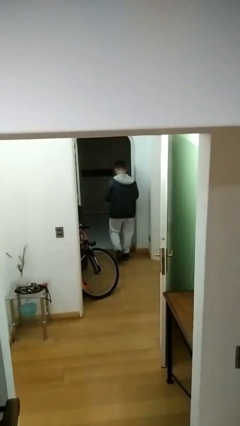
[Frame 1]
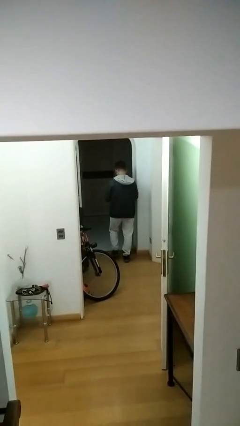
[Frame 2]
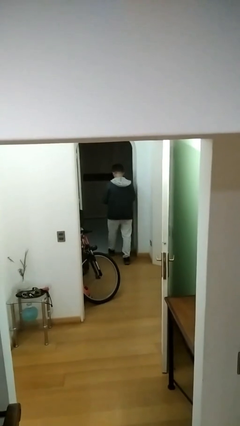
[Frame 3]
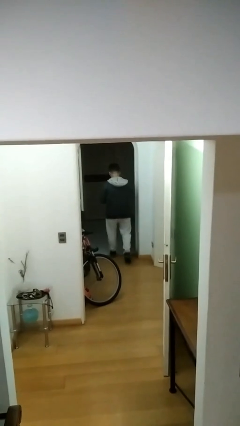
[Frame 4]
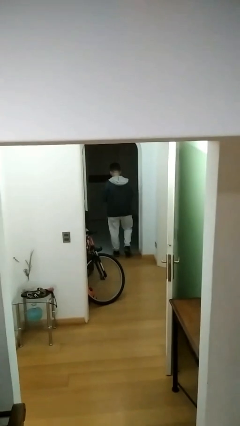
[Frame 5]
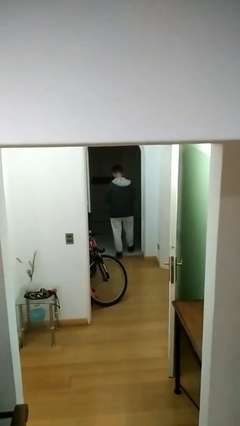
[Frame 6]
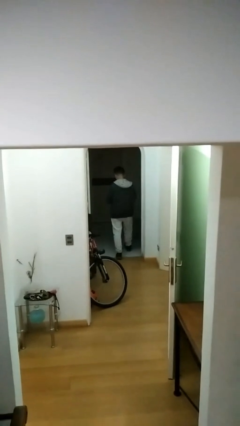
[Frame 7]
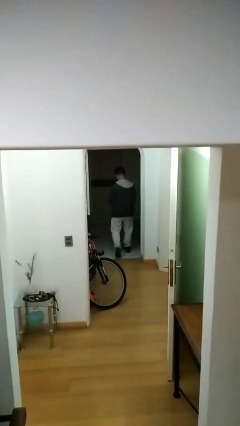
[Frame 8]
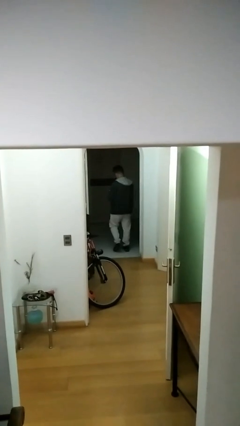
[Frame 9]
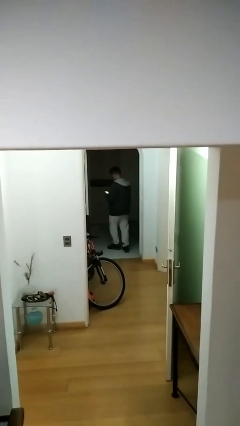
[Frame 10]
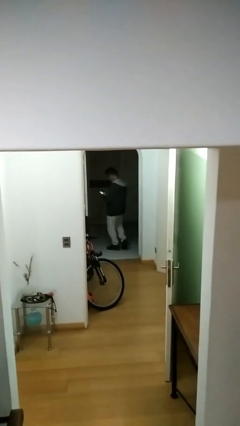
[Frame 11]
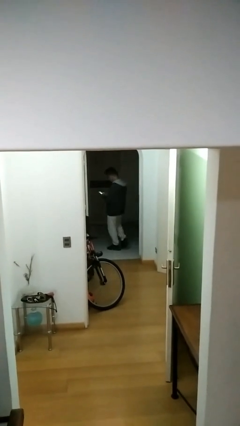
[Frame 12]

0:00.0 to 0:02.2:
person exits scene through structure

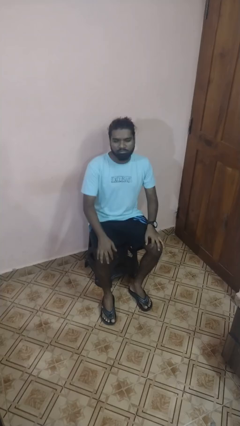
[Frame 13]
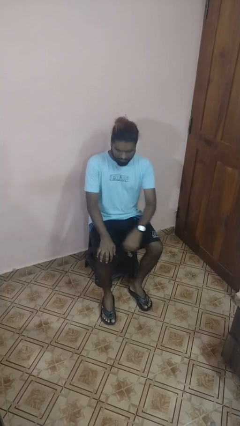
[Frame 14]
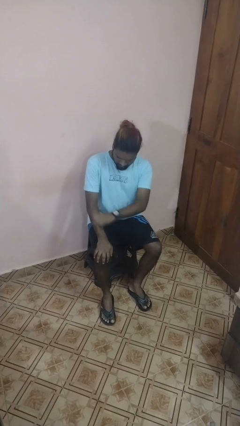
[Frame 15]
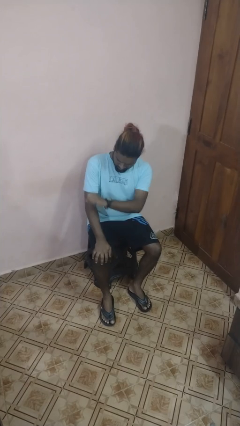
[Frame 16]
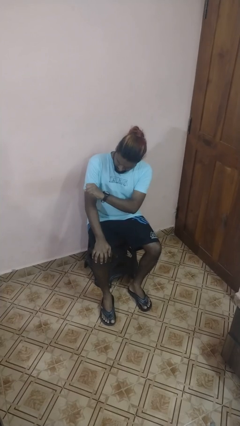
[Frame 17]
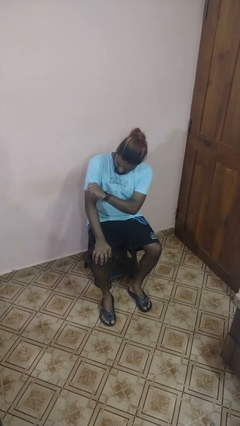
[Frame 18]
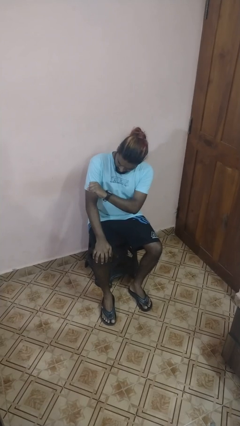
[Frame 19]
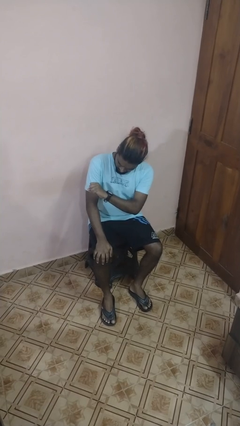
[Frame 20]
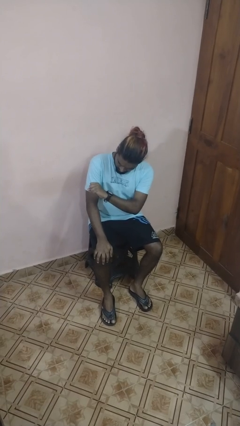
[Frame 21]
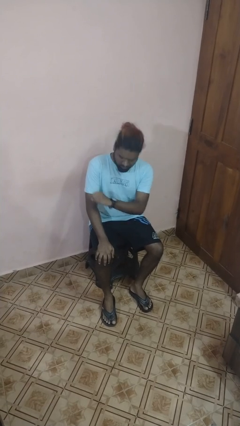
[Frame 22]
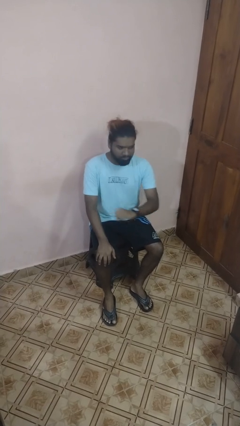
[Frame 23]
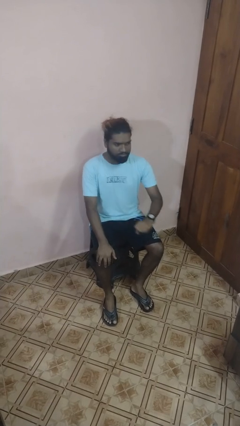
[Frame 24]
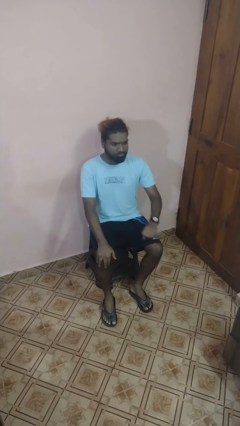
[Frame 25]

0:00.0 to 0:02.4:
person looks at wristwatch

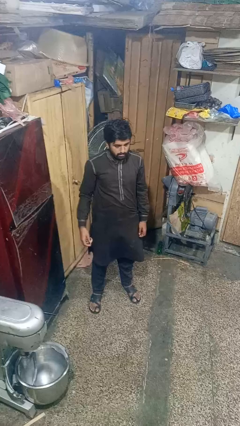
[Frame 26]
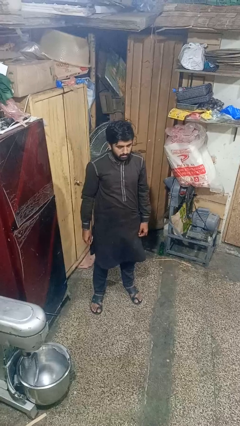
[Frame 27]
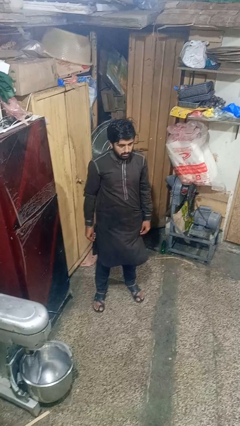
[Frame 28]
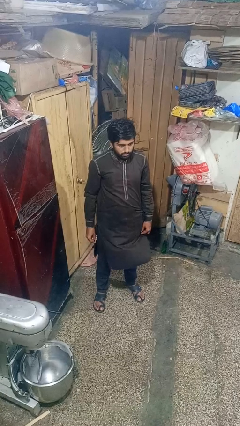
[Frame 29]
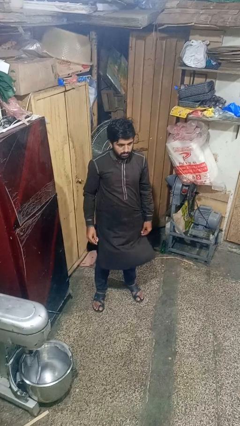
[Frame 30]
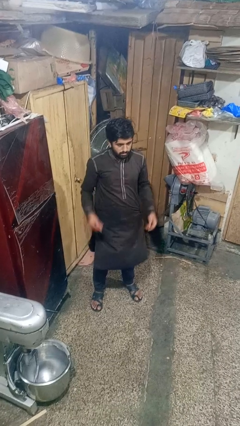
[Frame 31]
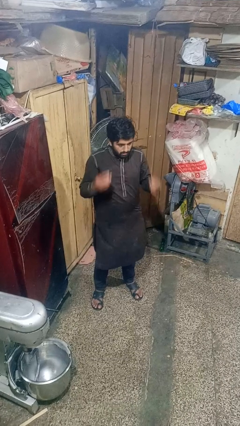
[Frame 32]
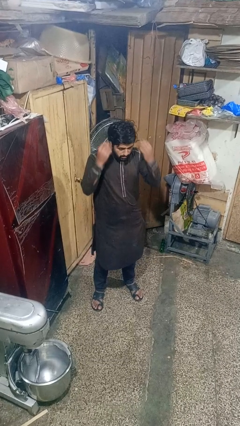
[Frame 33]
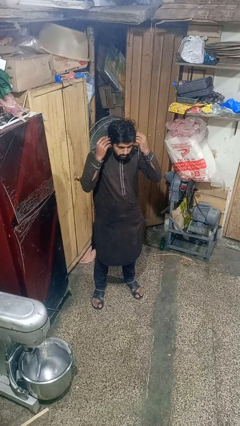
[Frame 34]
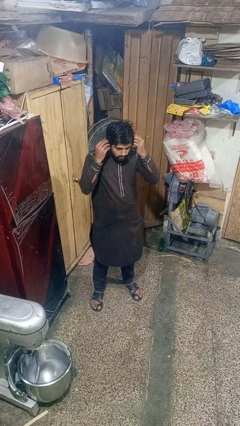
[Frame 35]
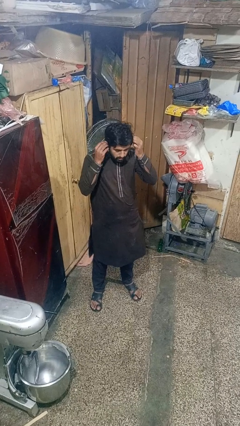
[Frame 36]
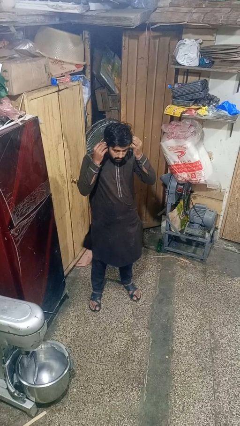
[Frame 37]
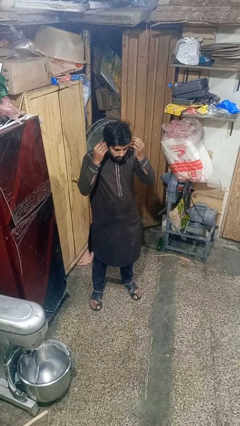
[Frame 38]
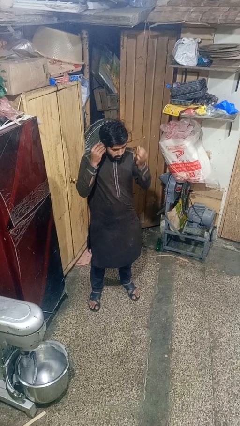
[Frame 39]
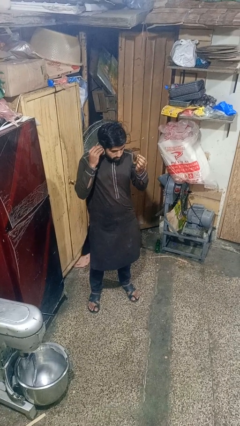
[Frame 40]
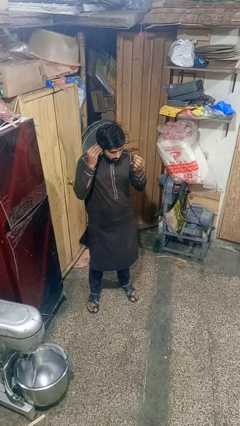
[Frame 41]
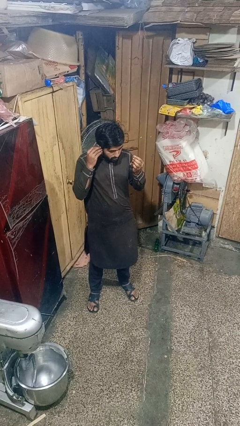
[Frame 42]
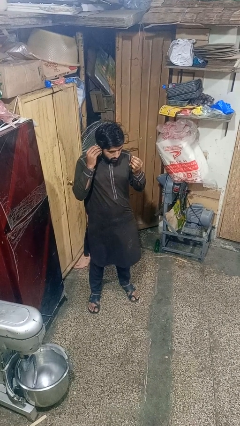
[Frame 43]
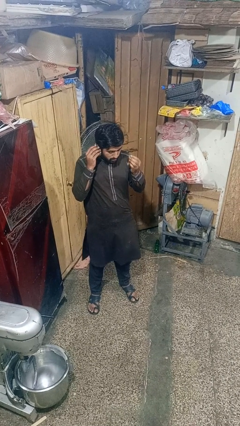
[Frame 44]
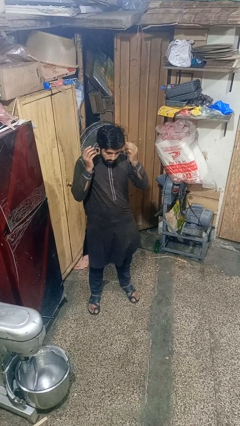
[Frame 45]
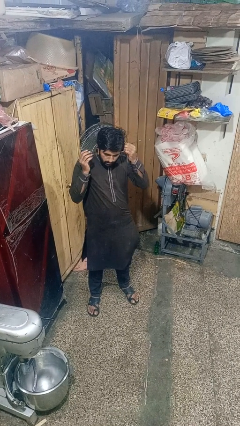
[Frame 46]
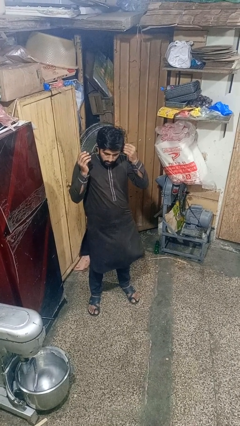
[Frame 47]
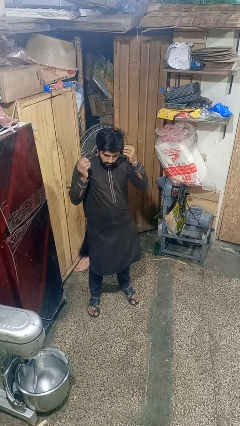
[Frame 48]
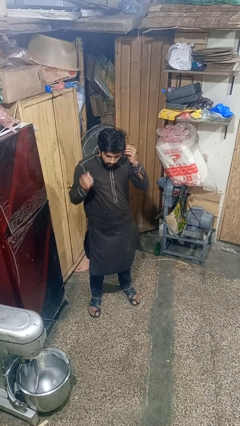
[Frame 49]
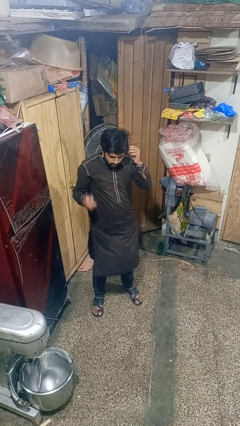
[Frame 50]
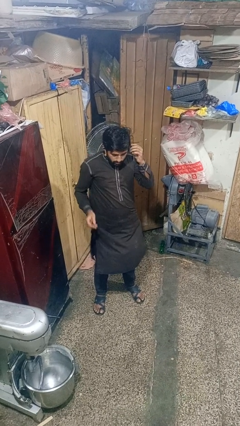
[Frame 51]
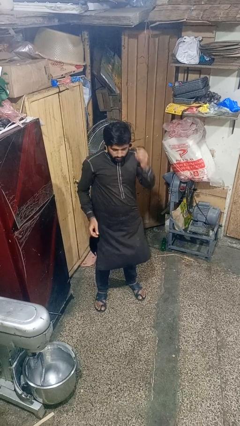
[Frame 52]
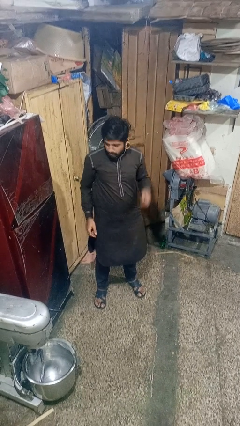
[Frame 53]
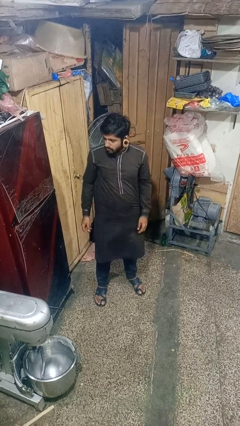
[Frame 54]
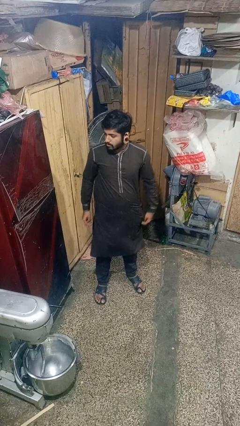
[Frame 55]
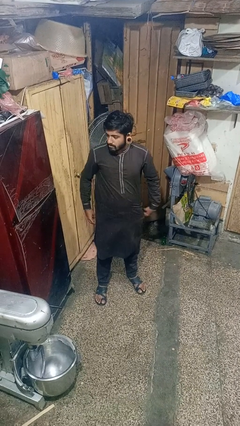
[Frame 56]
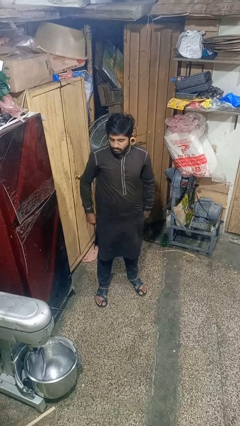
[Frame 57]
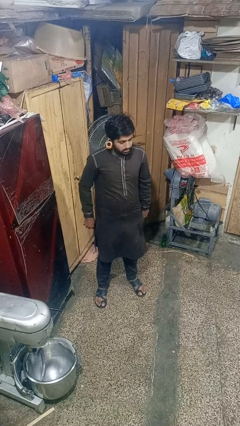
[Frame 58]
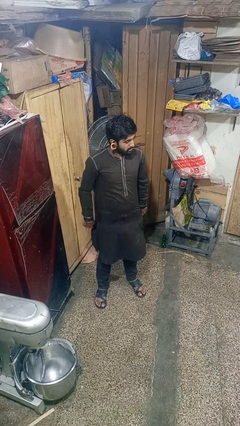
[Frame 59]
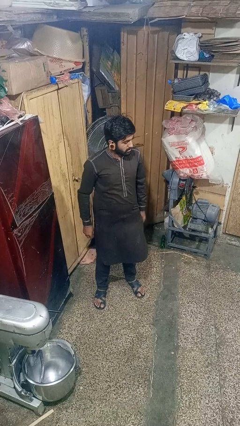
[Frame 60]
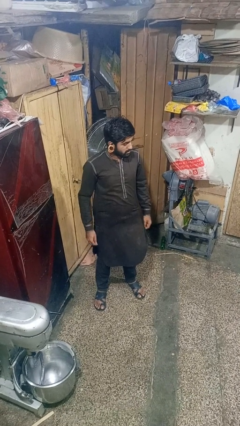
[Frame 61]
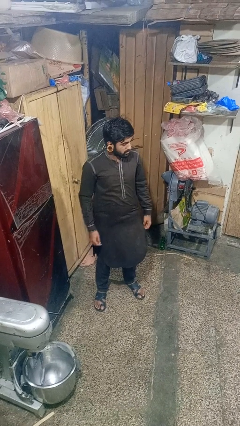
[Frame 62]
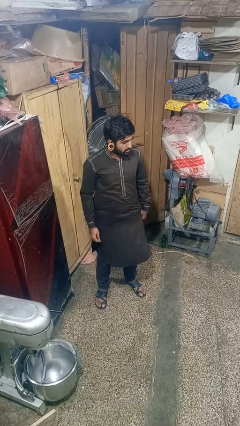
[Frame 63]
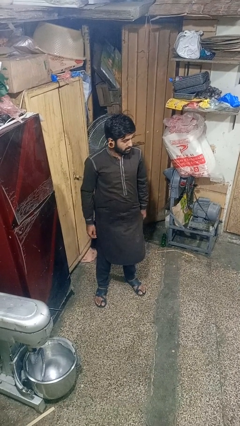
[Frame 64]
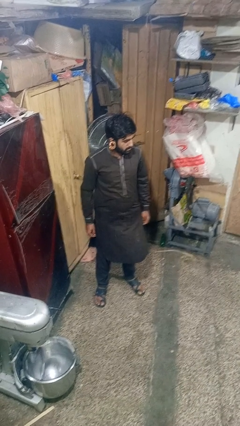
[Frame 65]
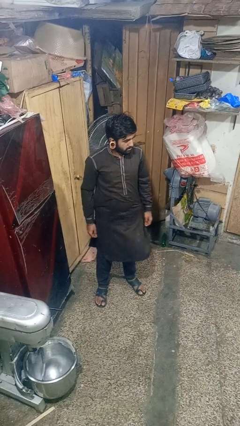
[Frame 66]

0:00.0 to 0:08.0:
person puts on earrings

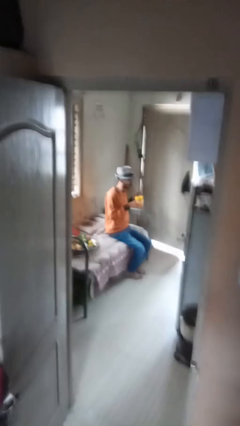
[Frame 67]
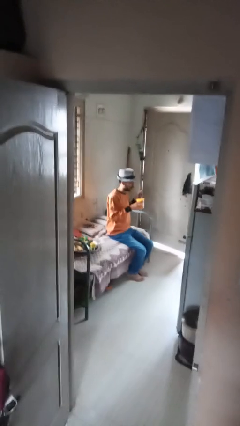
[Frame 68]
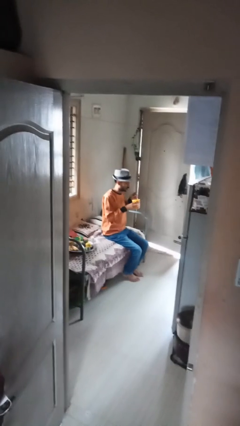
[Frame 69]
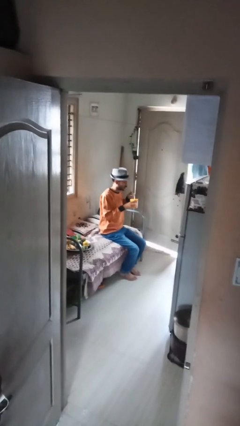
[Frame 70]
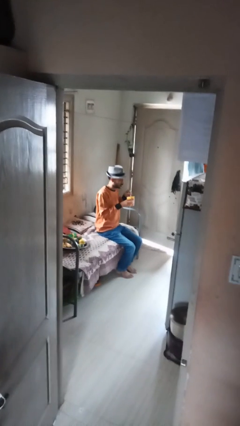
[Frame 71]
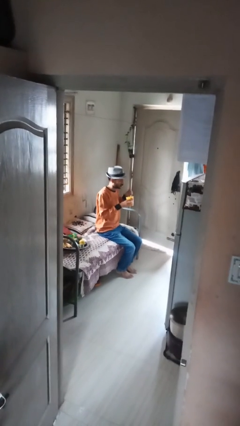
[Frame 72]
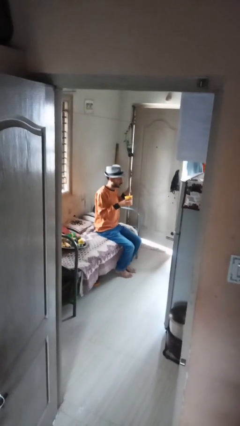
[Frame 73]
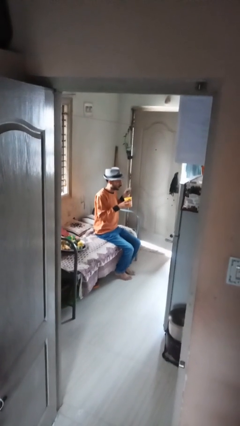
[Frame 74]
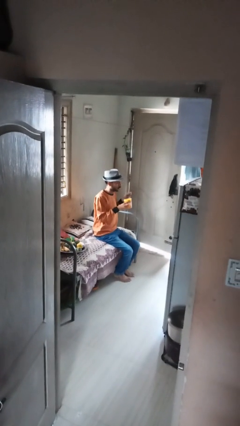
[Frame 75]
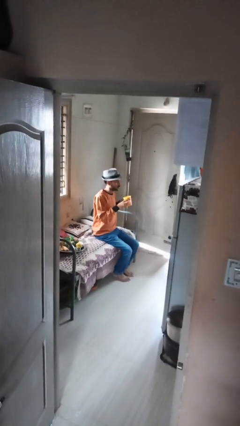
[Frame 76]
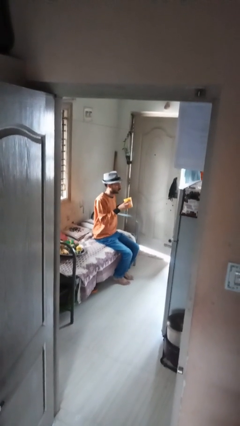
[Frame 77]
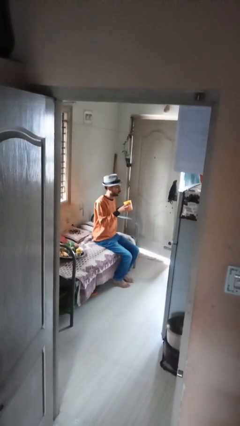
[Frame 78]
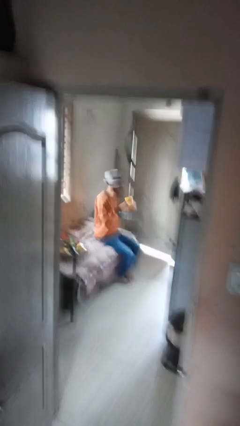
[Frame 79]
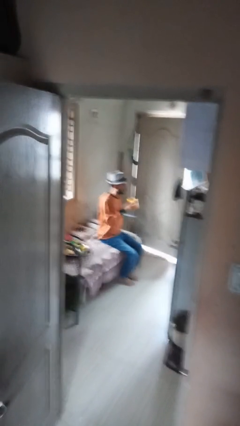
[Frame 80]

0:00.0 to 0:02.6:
person stirs mug

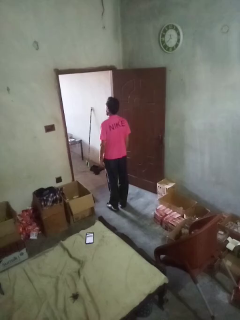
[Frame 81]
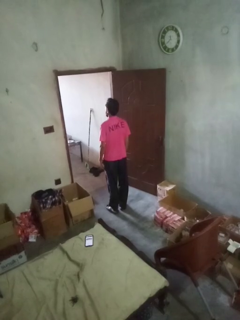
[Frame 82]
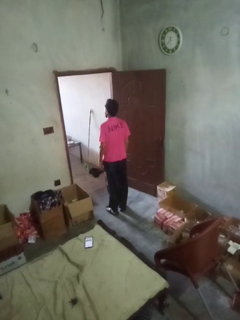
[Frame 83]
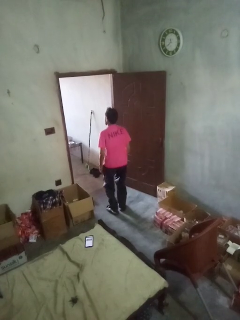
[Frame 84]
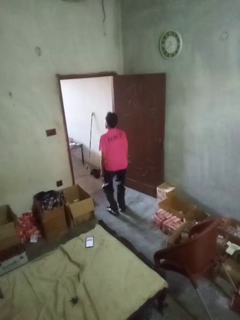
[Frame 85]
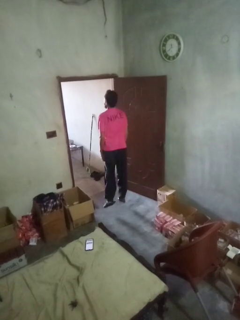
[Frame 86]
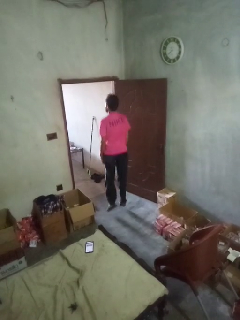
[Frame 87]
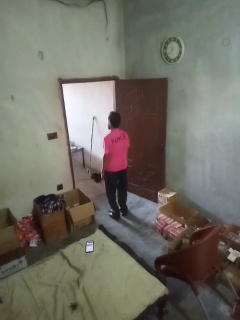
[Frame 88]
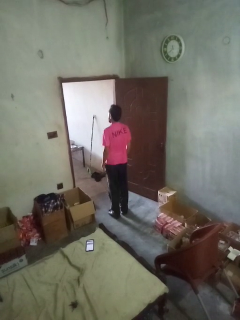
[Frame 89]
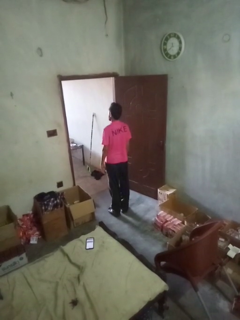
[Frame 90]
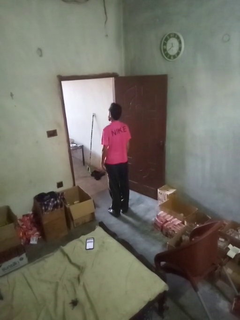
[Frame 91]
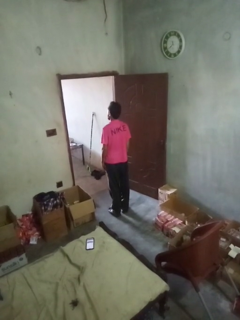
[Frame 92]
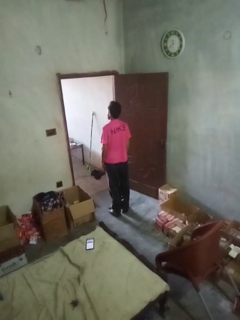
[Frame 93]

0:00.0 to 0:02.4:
person jumps

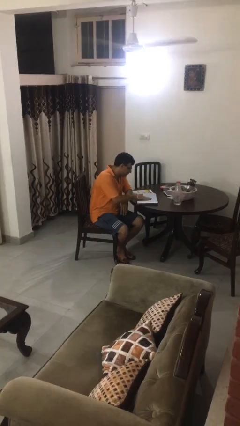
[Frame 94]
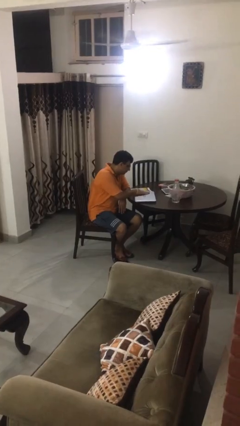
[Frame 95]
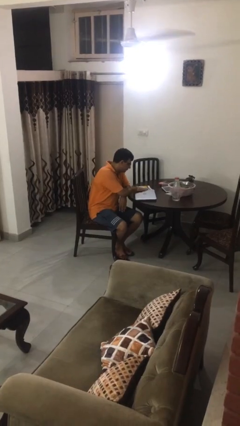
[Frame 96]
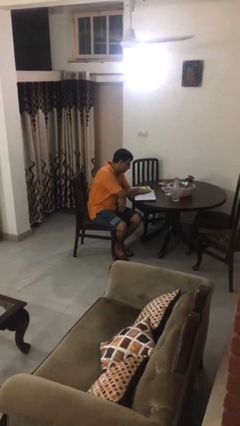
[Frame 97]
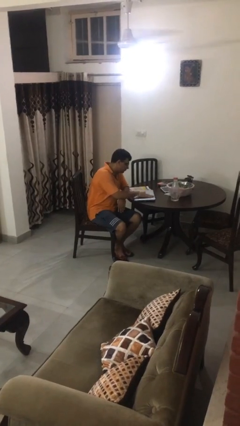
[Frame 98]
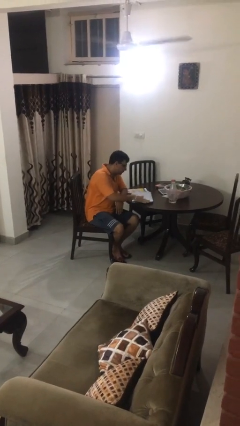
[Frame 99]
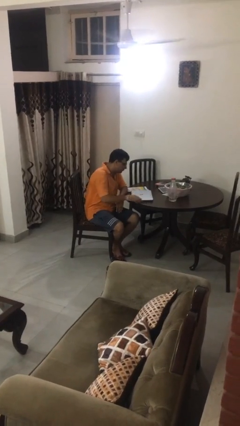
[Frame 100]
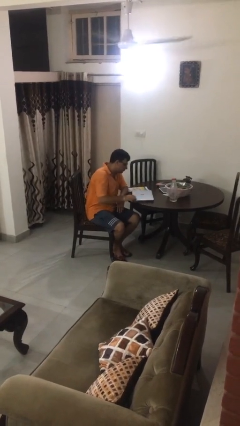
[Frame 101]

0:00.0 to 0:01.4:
person waves hand over object
